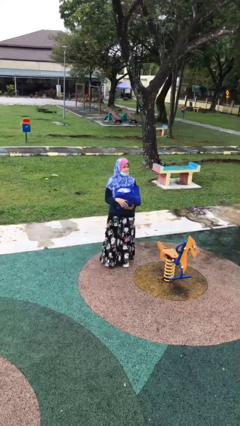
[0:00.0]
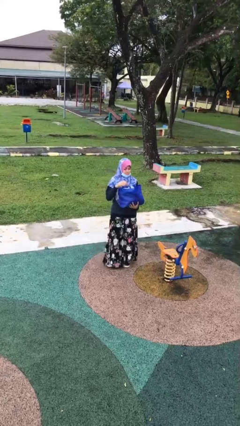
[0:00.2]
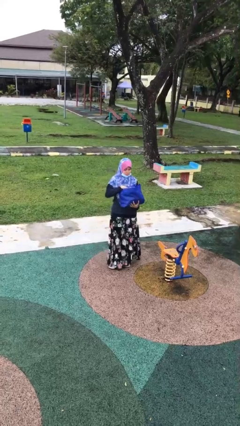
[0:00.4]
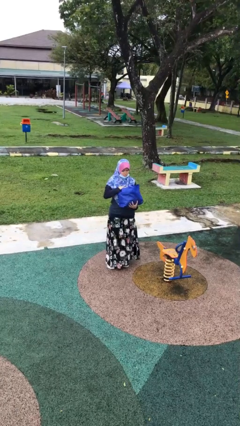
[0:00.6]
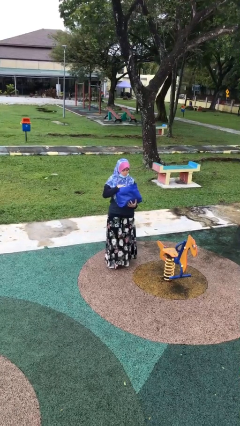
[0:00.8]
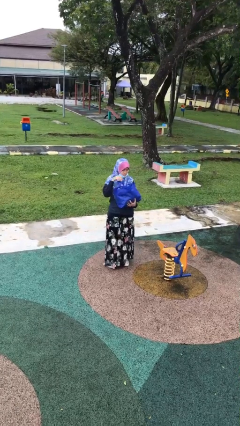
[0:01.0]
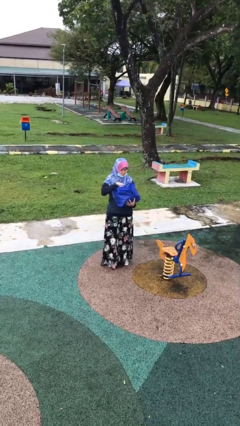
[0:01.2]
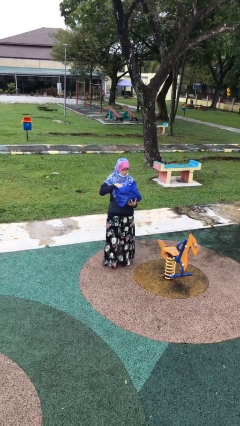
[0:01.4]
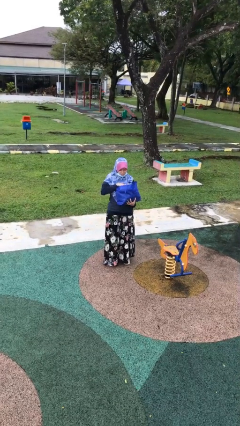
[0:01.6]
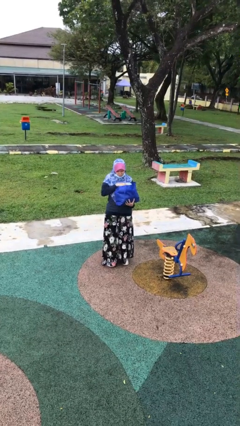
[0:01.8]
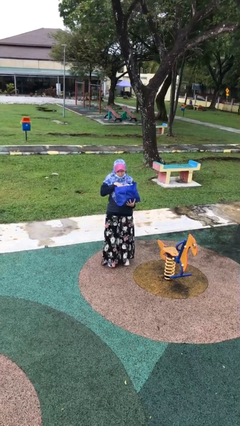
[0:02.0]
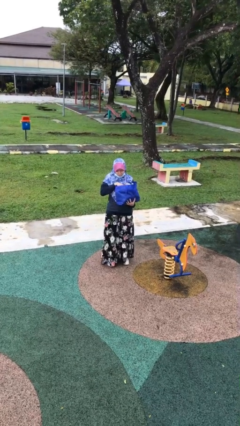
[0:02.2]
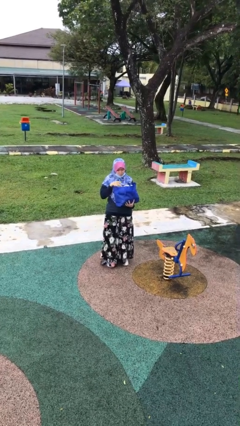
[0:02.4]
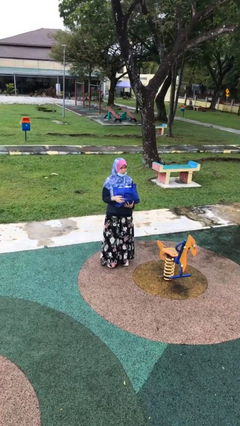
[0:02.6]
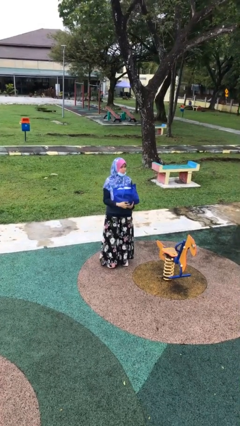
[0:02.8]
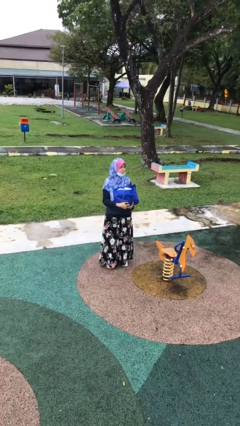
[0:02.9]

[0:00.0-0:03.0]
person searches in bag

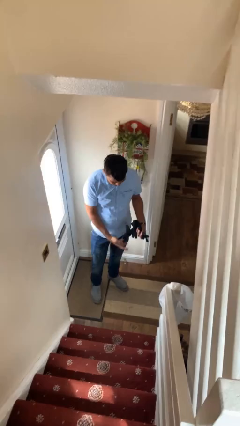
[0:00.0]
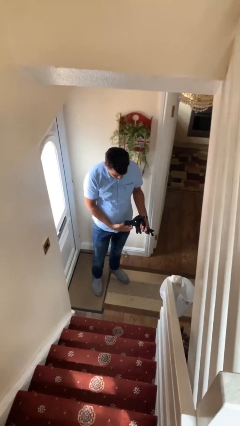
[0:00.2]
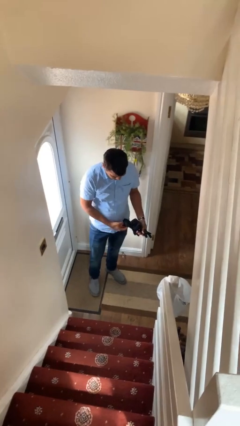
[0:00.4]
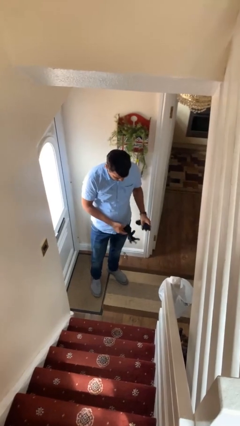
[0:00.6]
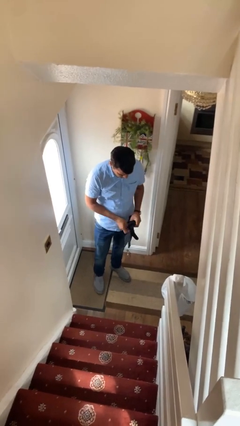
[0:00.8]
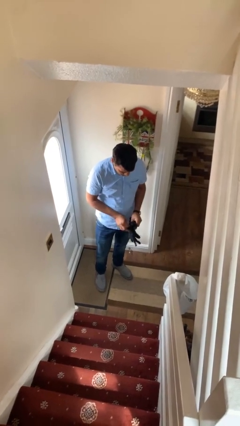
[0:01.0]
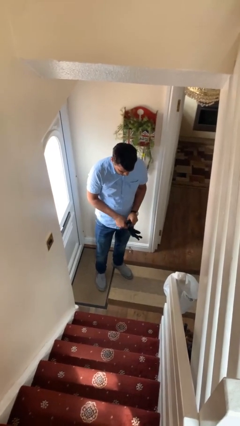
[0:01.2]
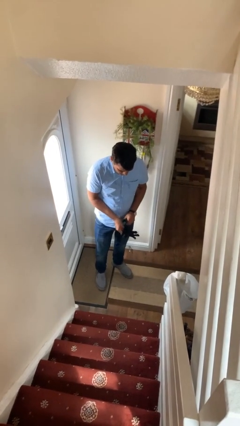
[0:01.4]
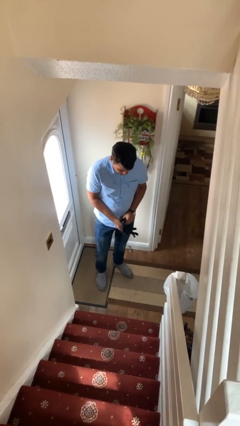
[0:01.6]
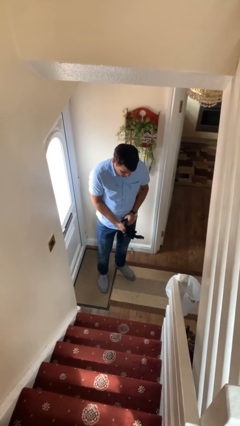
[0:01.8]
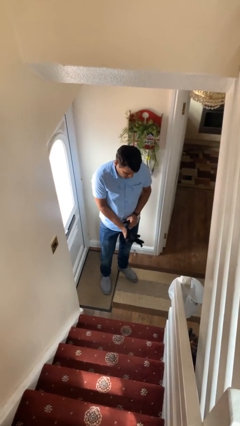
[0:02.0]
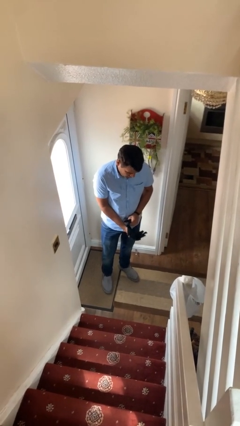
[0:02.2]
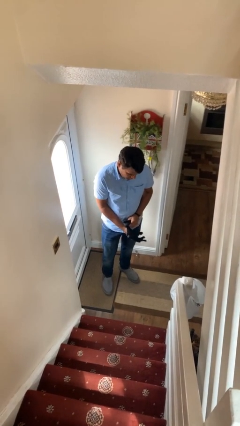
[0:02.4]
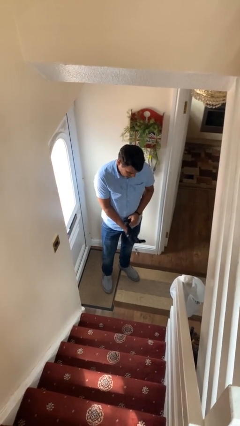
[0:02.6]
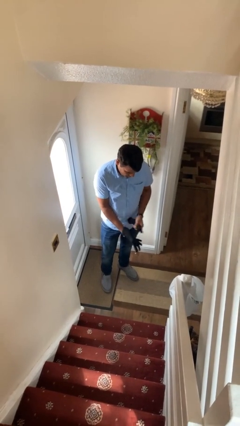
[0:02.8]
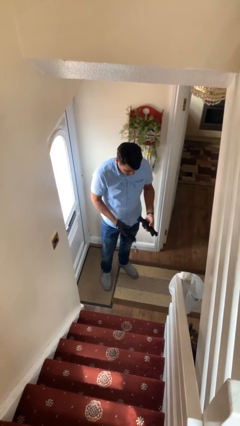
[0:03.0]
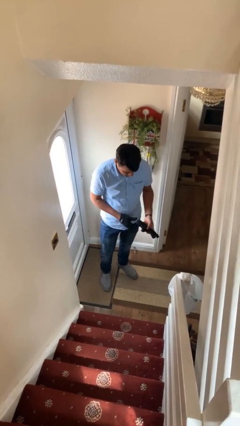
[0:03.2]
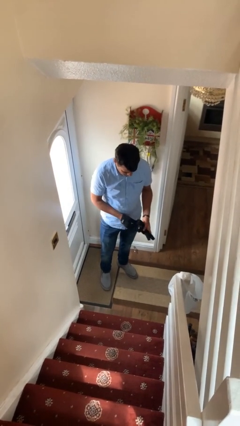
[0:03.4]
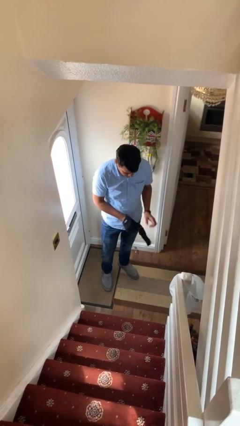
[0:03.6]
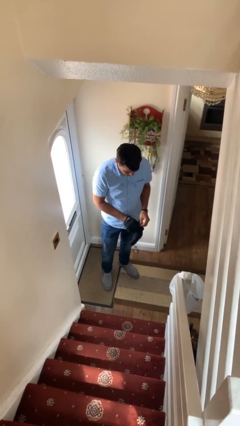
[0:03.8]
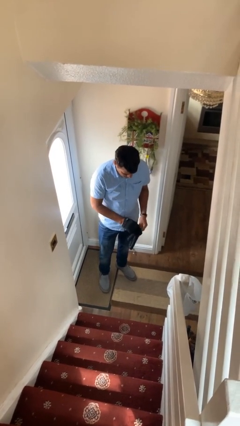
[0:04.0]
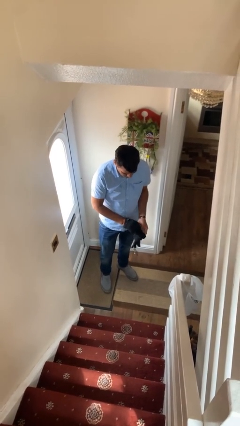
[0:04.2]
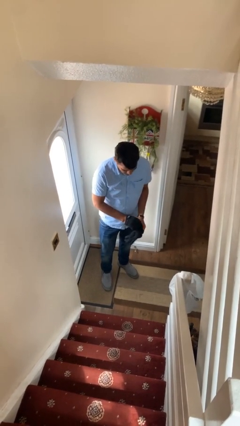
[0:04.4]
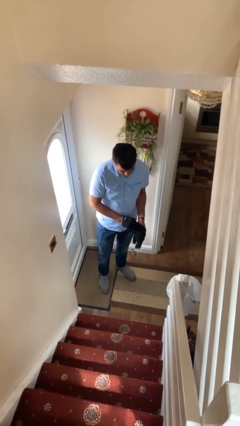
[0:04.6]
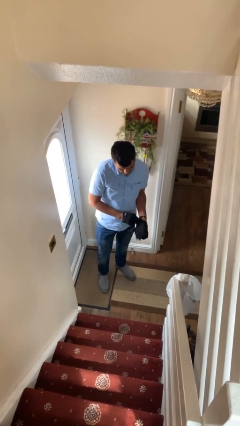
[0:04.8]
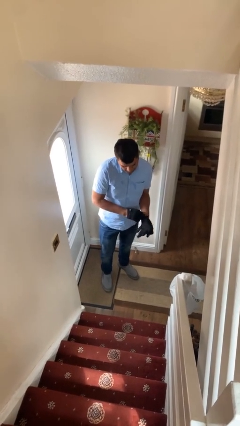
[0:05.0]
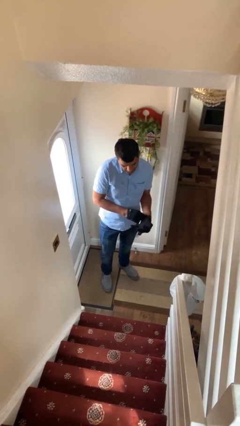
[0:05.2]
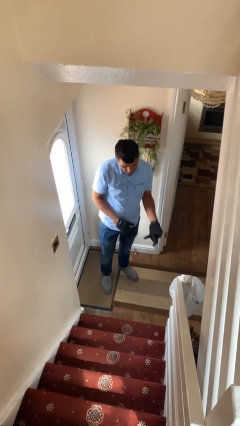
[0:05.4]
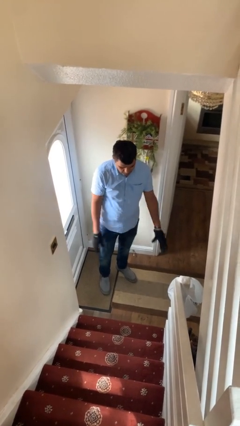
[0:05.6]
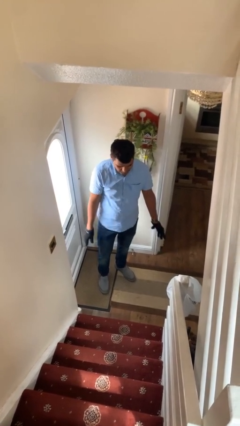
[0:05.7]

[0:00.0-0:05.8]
person puts on gloves

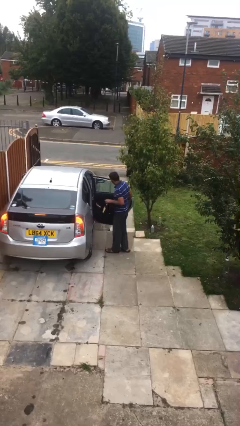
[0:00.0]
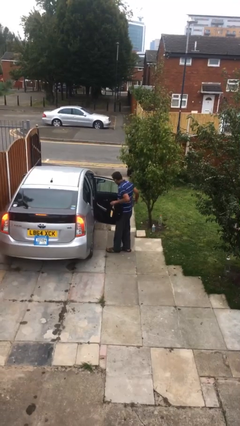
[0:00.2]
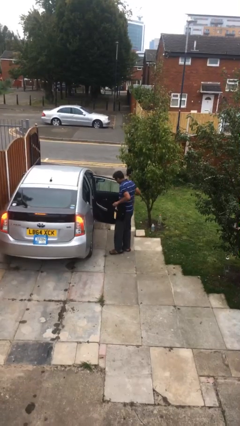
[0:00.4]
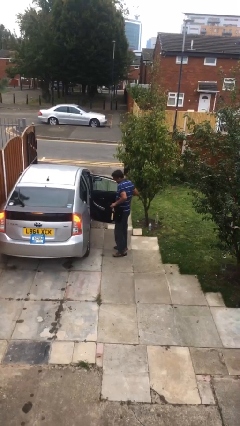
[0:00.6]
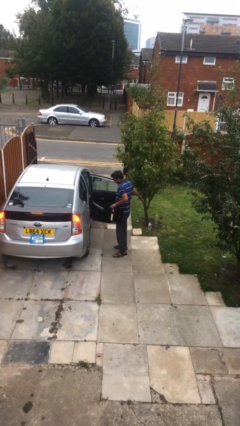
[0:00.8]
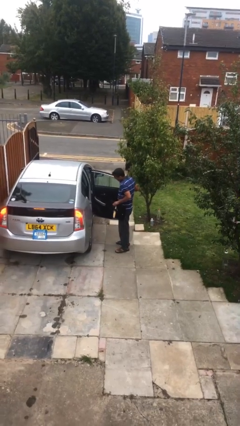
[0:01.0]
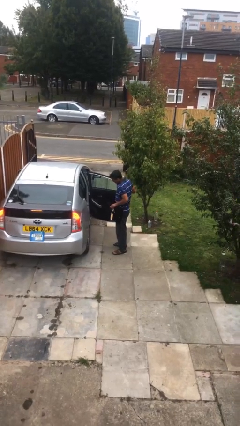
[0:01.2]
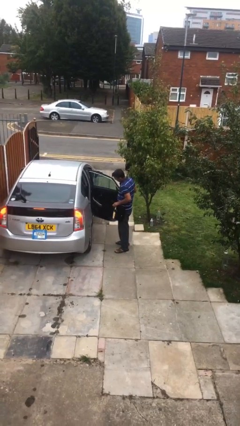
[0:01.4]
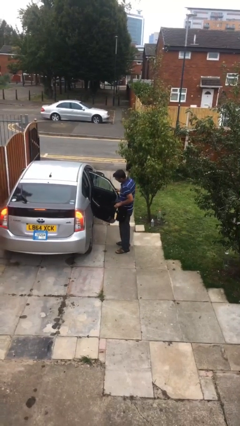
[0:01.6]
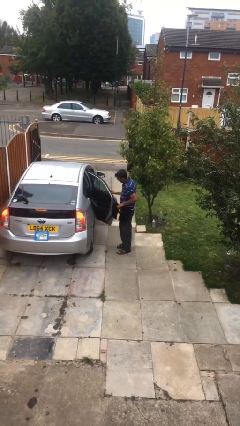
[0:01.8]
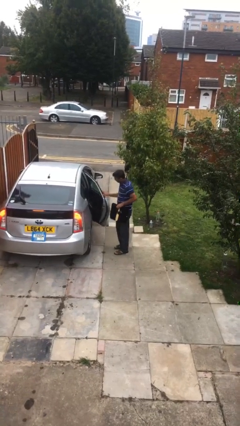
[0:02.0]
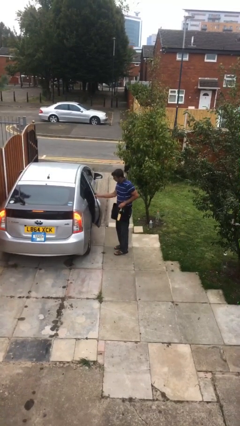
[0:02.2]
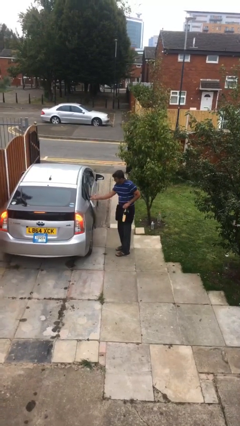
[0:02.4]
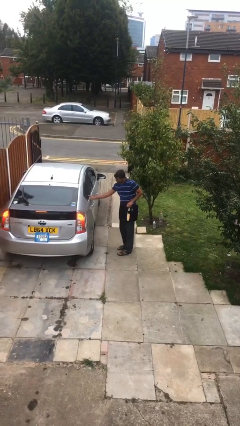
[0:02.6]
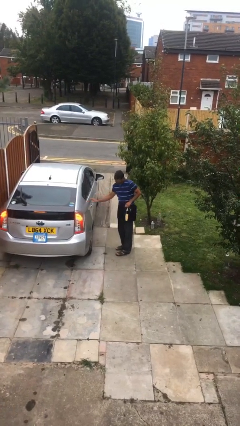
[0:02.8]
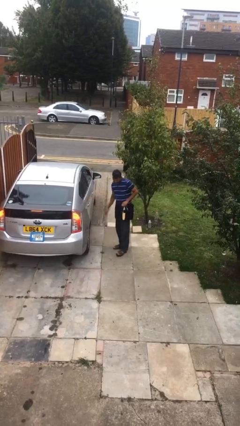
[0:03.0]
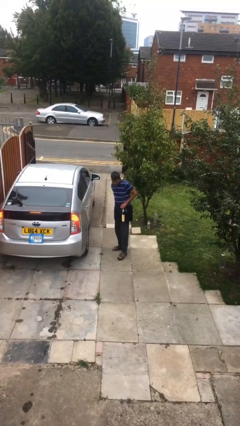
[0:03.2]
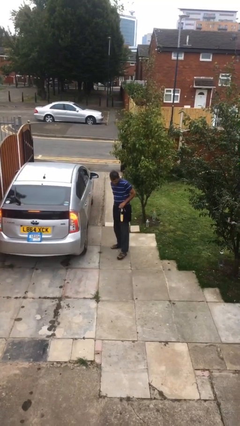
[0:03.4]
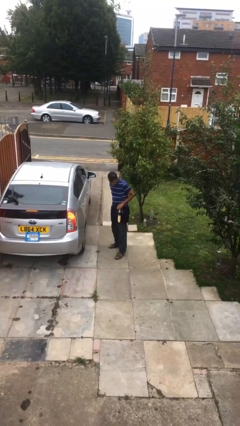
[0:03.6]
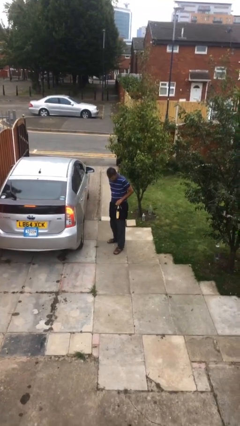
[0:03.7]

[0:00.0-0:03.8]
person closes car door

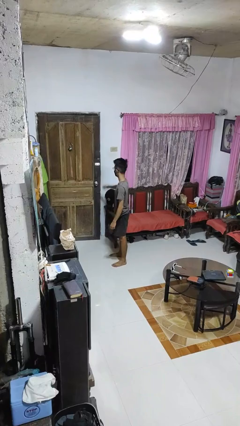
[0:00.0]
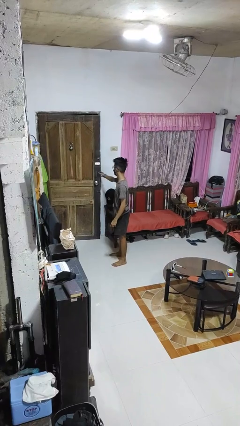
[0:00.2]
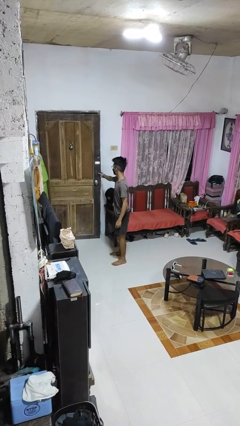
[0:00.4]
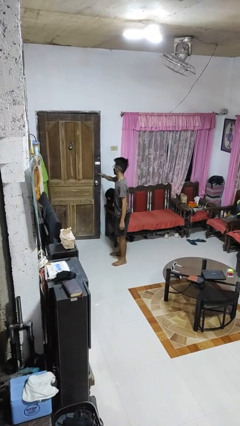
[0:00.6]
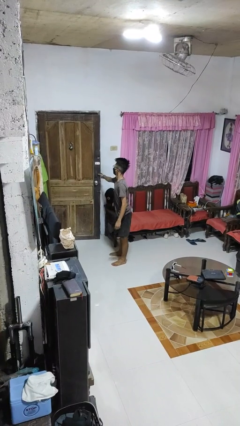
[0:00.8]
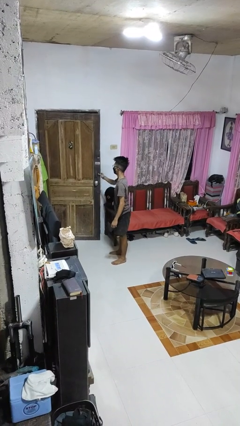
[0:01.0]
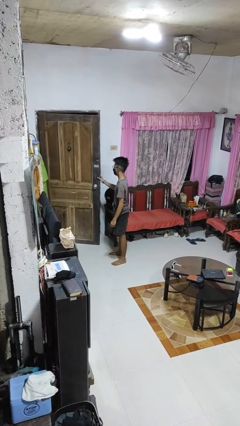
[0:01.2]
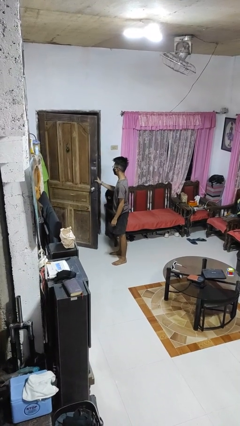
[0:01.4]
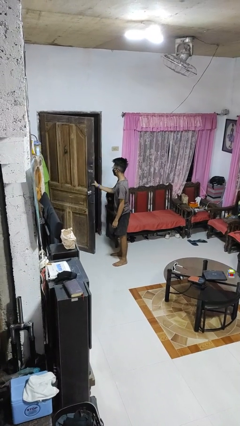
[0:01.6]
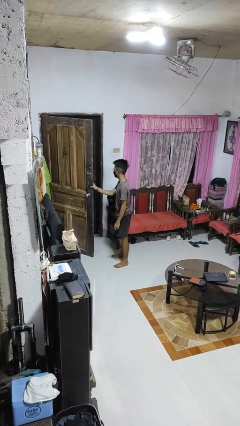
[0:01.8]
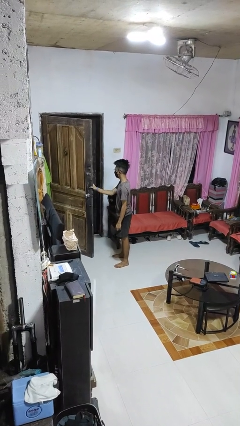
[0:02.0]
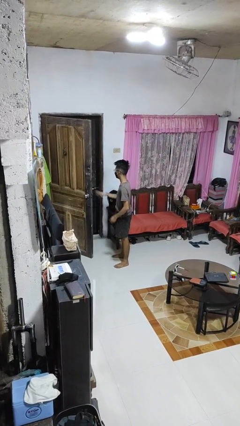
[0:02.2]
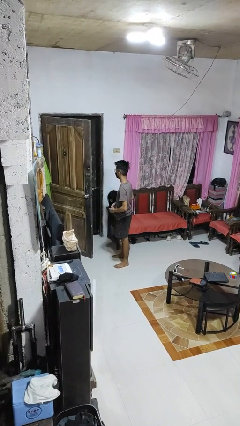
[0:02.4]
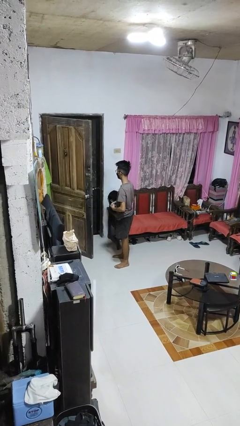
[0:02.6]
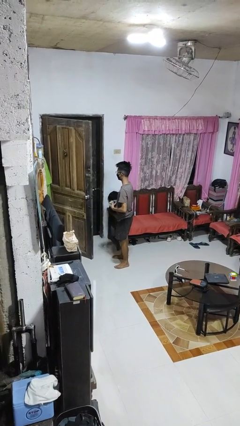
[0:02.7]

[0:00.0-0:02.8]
person opens facility door

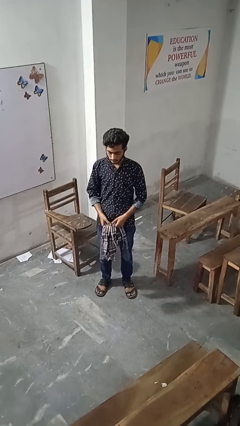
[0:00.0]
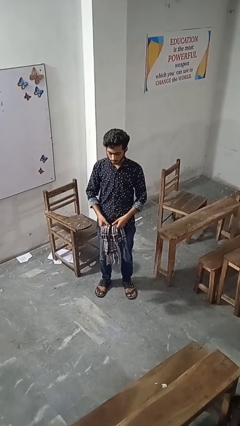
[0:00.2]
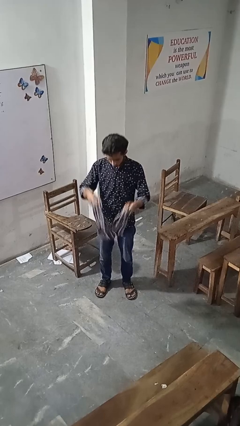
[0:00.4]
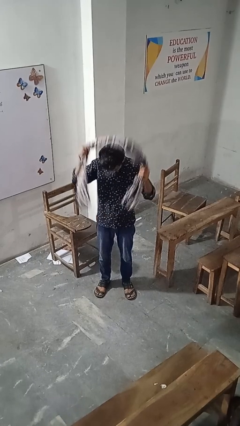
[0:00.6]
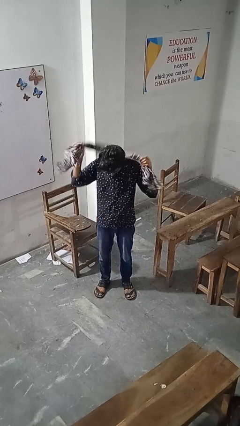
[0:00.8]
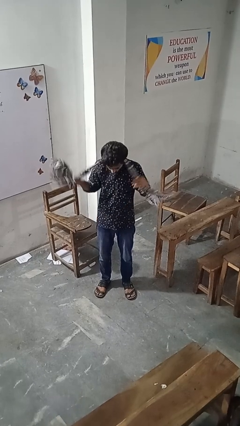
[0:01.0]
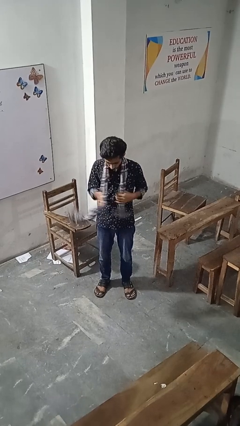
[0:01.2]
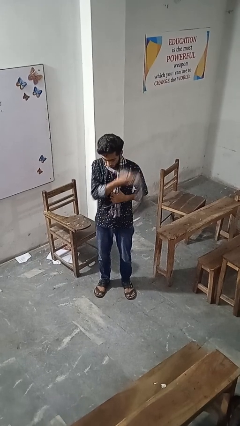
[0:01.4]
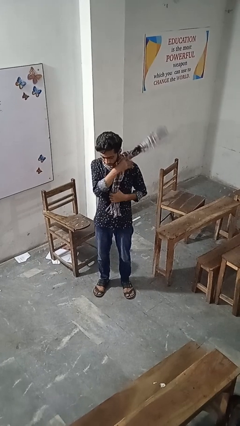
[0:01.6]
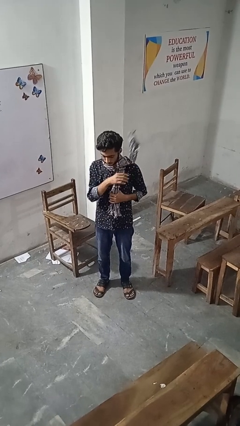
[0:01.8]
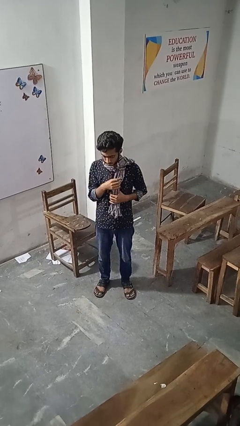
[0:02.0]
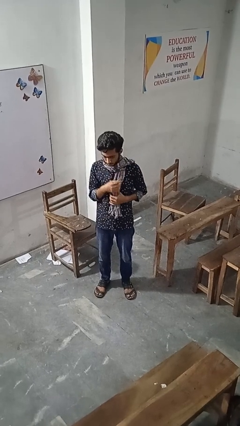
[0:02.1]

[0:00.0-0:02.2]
person puts on scarf
